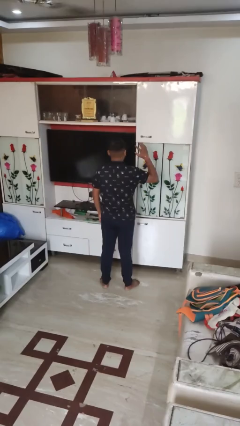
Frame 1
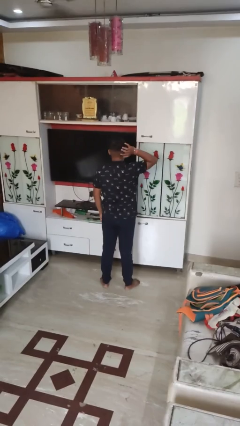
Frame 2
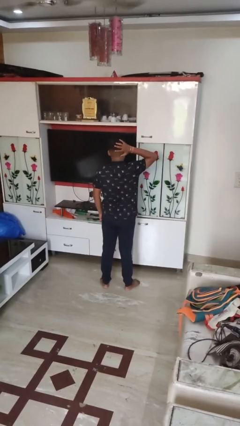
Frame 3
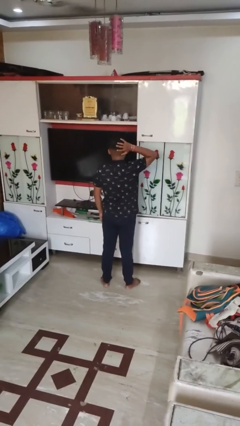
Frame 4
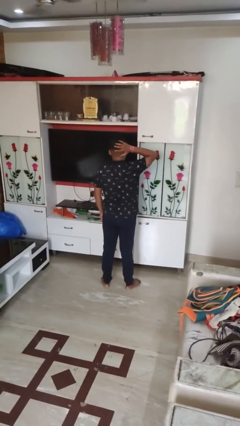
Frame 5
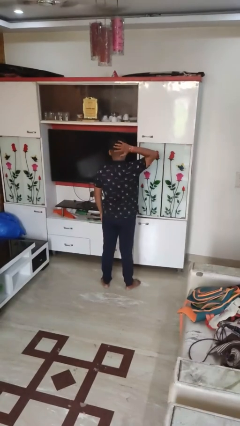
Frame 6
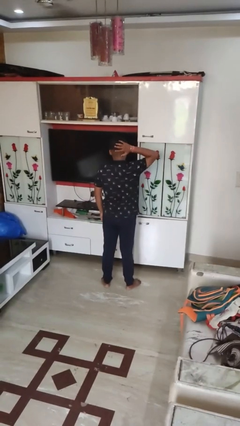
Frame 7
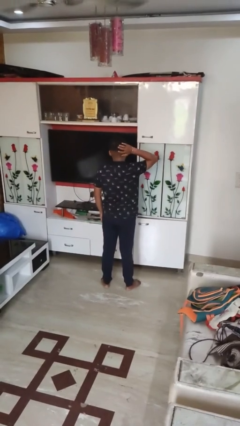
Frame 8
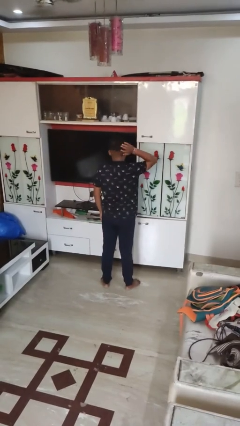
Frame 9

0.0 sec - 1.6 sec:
person pats head

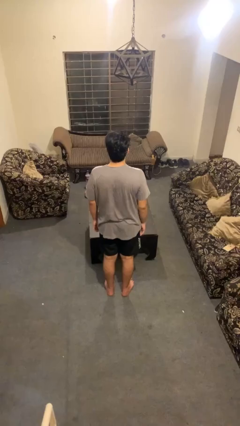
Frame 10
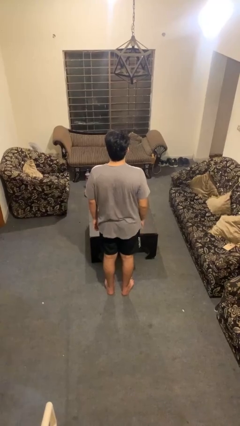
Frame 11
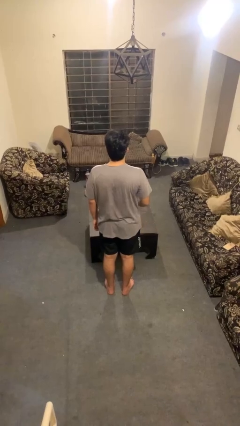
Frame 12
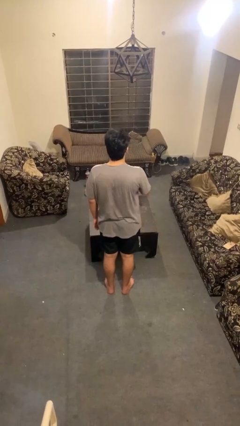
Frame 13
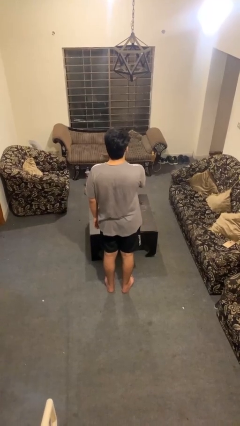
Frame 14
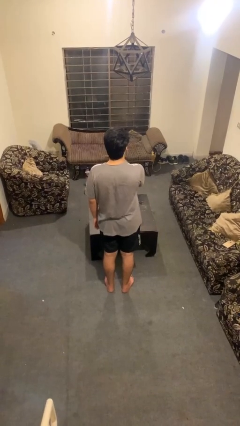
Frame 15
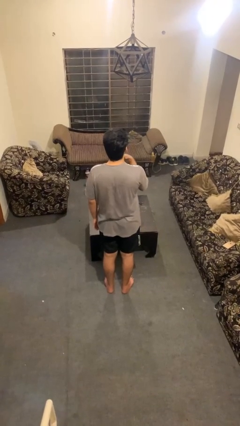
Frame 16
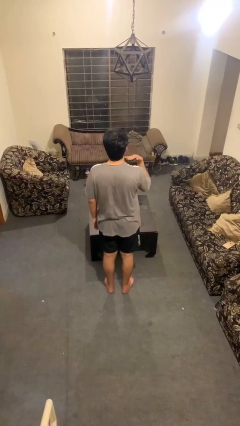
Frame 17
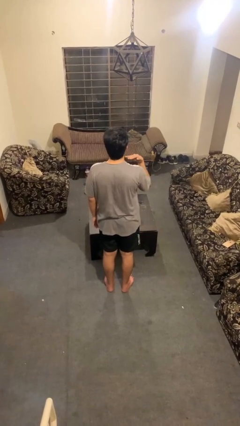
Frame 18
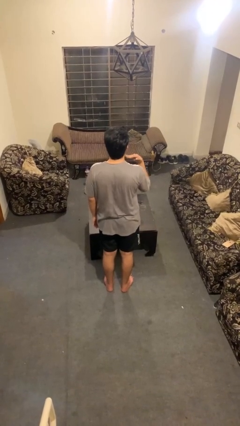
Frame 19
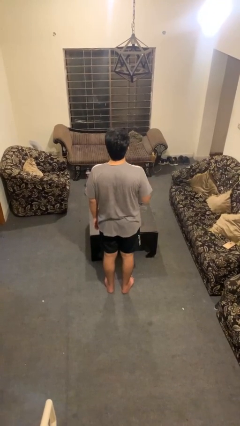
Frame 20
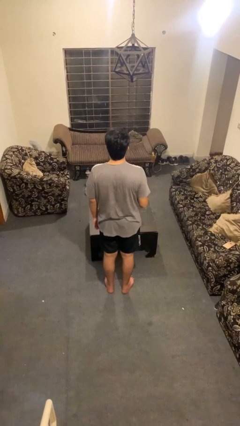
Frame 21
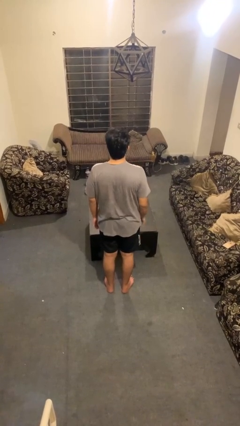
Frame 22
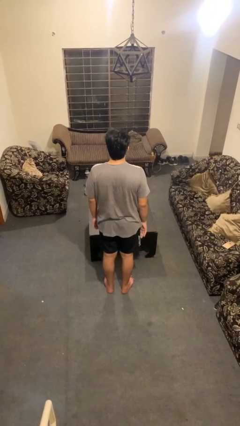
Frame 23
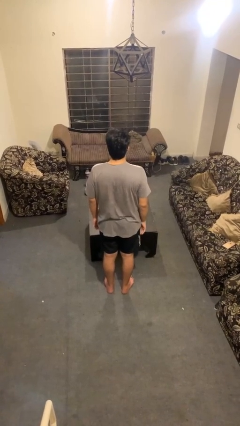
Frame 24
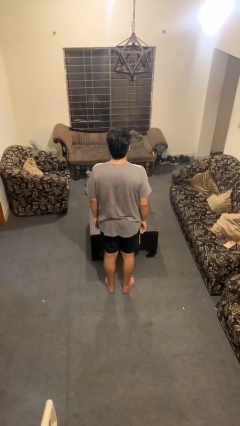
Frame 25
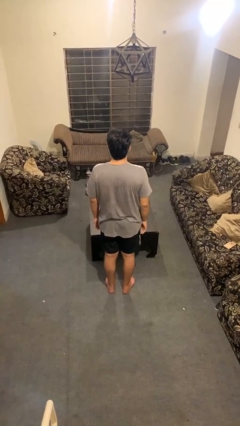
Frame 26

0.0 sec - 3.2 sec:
person gestures cut

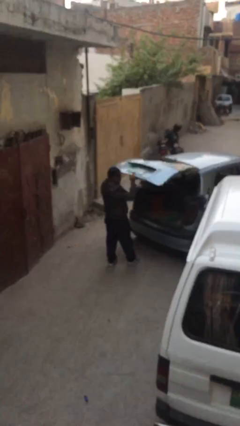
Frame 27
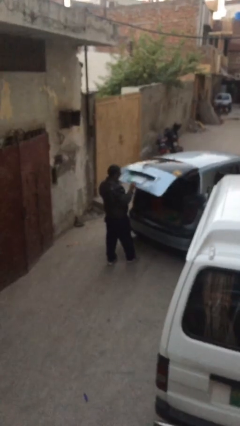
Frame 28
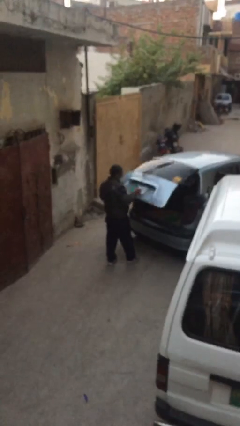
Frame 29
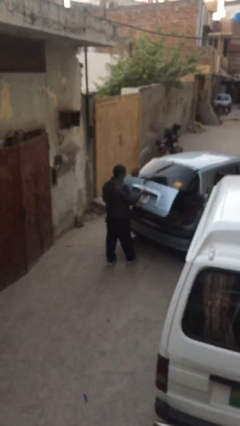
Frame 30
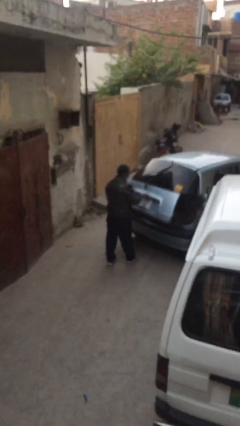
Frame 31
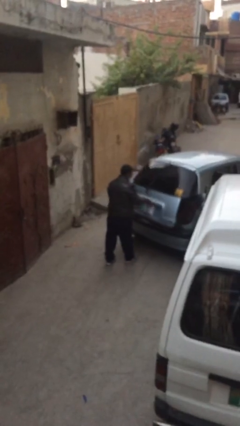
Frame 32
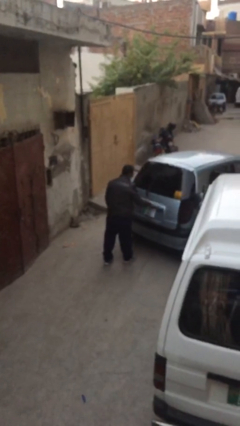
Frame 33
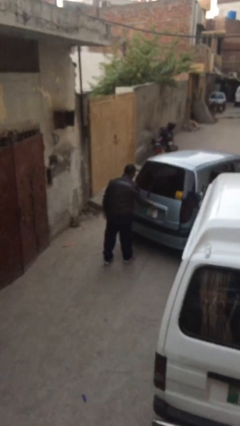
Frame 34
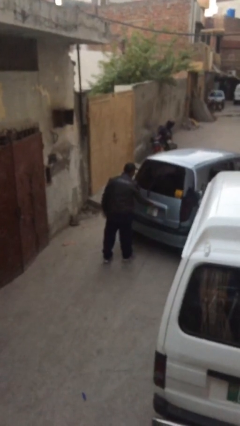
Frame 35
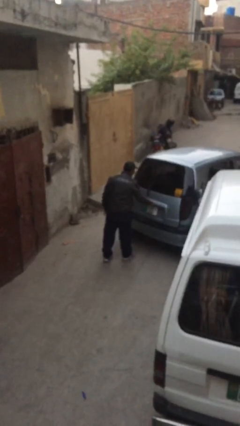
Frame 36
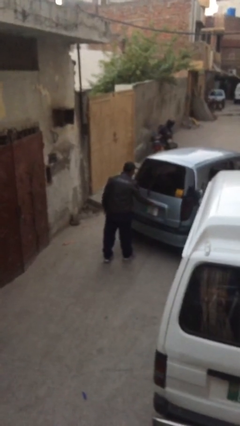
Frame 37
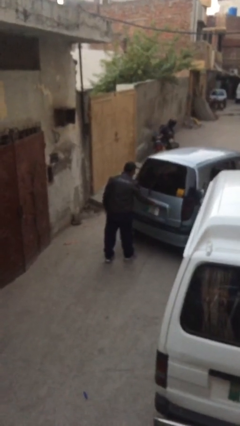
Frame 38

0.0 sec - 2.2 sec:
person closes car trunk

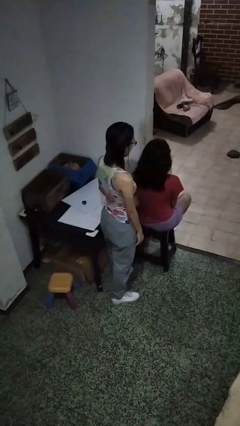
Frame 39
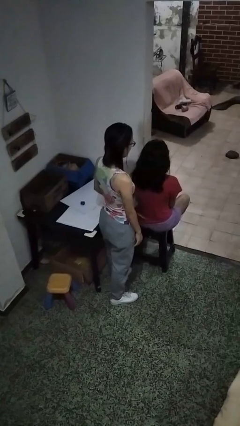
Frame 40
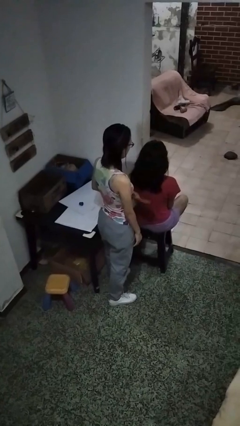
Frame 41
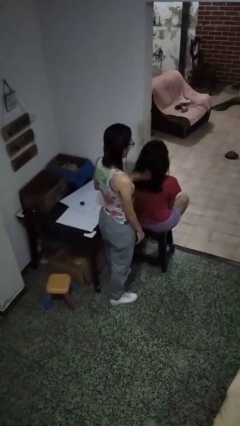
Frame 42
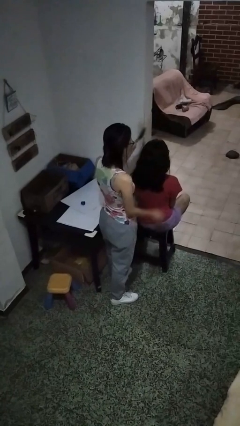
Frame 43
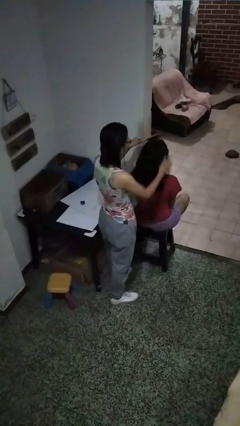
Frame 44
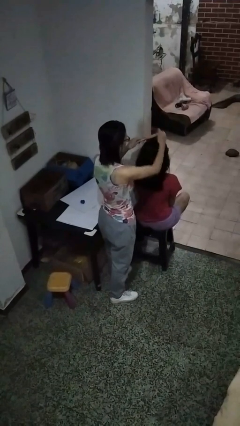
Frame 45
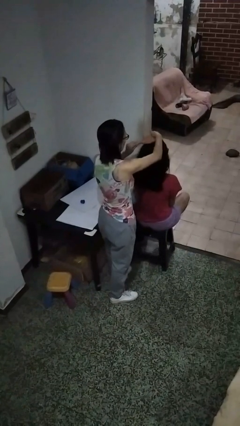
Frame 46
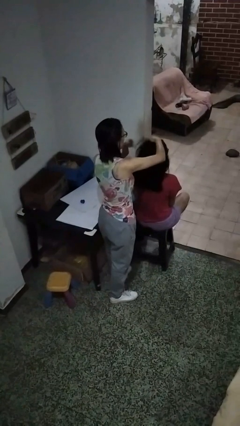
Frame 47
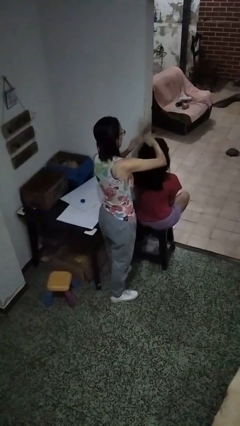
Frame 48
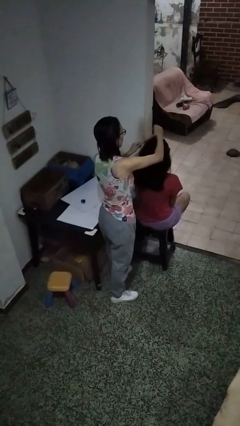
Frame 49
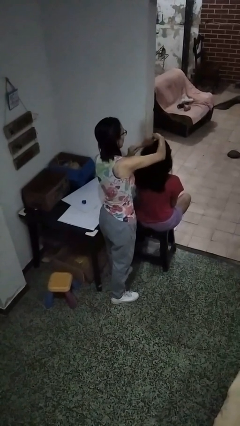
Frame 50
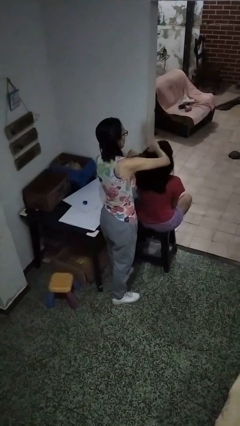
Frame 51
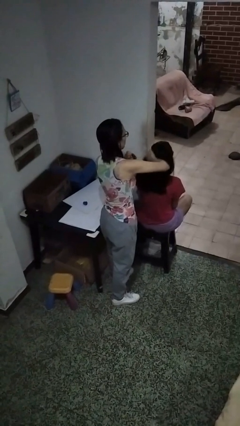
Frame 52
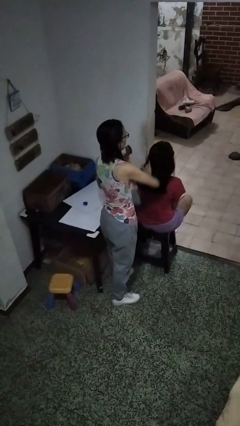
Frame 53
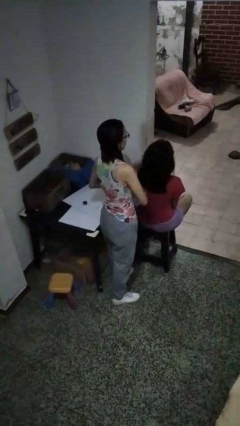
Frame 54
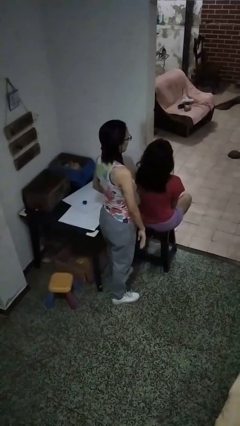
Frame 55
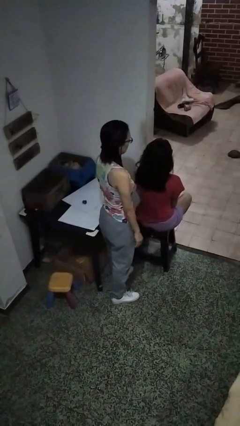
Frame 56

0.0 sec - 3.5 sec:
person brushes hair of person

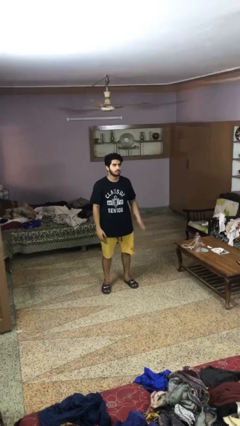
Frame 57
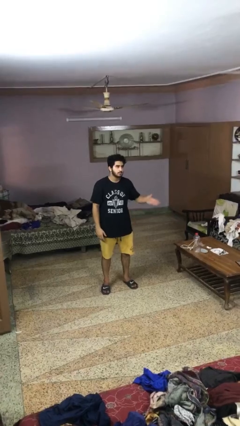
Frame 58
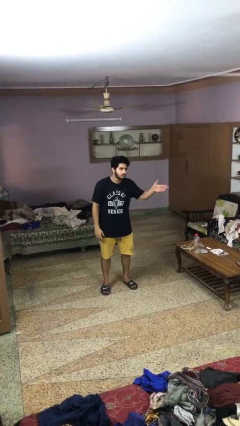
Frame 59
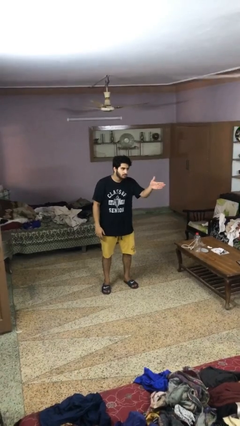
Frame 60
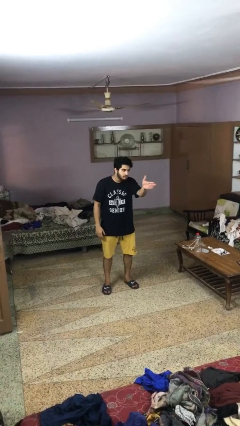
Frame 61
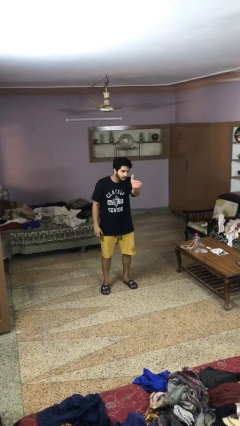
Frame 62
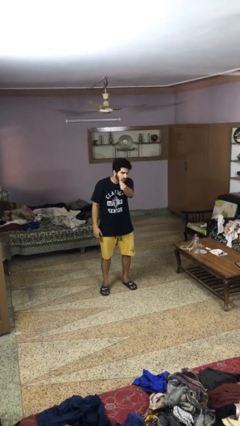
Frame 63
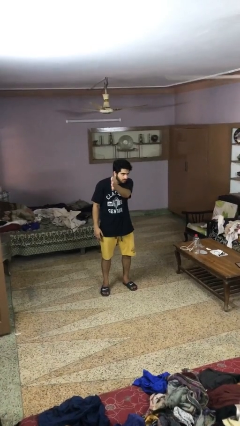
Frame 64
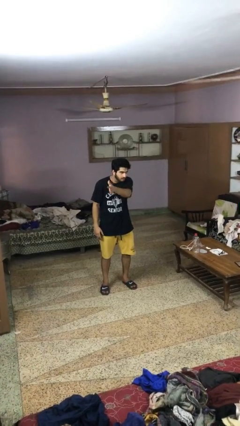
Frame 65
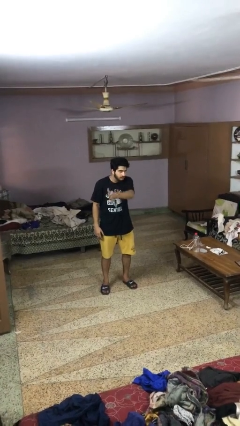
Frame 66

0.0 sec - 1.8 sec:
person gestures swipe right

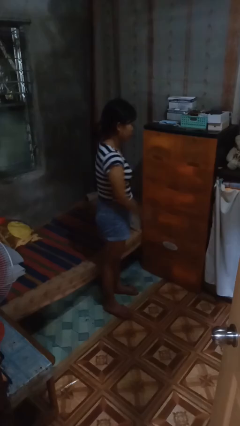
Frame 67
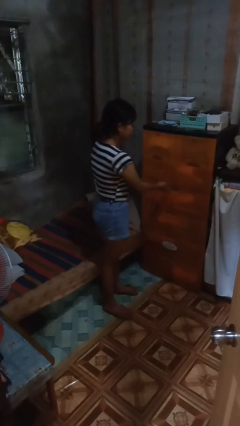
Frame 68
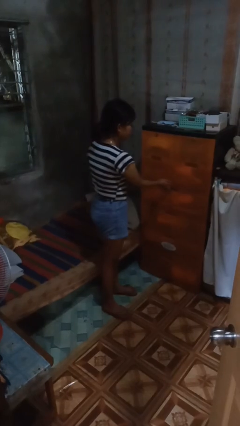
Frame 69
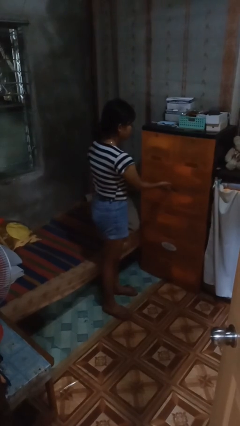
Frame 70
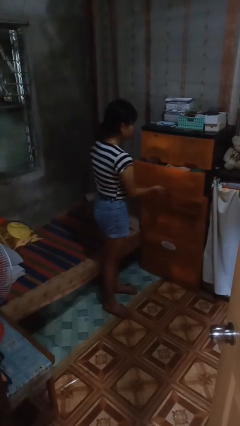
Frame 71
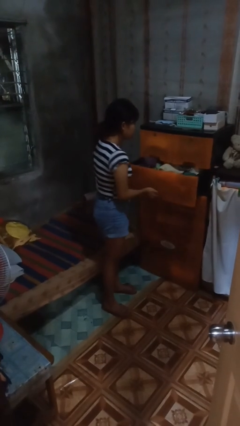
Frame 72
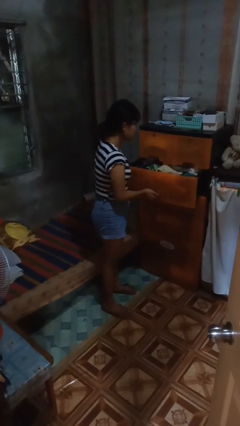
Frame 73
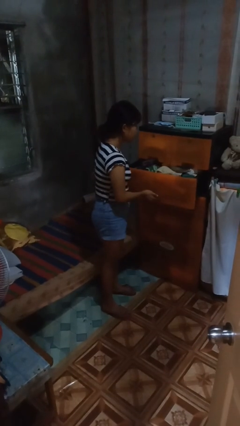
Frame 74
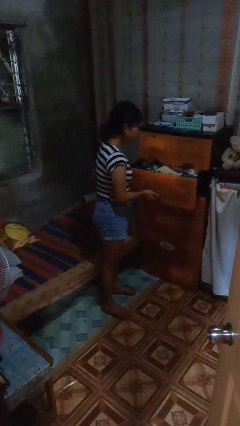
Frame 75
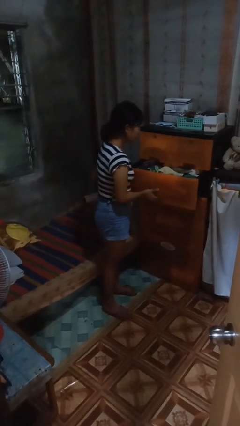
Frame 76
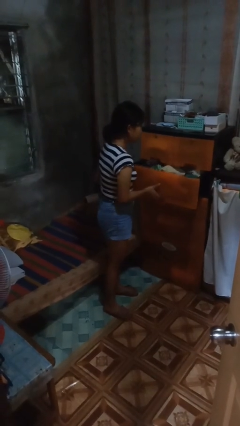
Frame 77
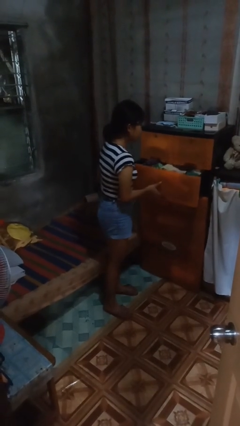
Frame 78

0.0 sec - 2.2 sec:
person opens dresser drawer

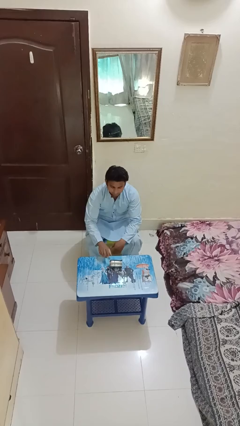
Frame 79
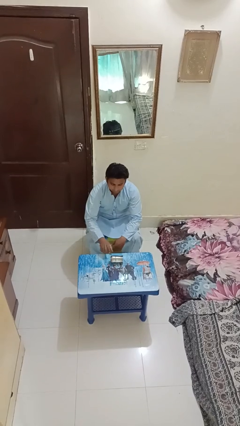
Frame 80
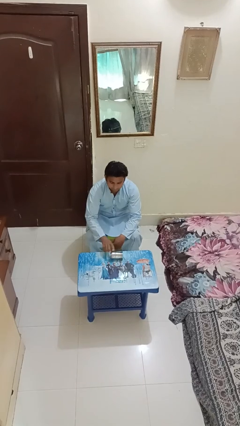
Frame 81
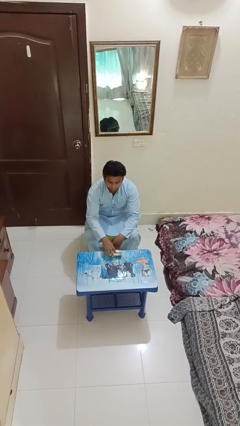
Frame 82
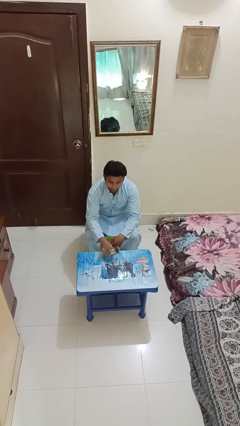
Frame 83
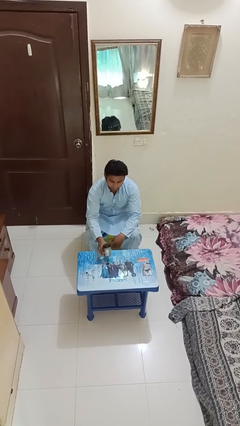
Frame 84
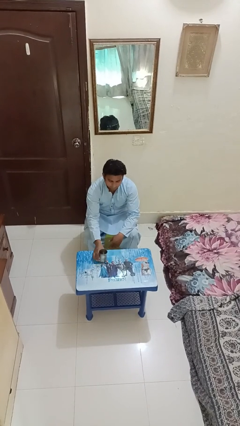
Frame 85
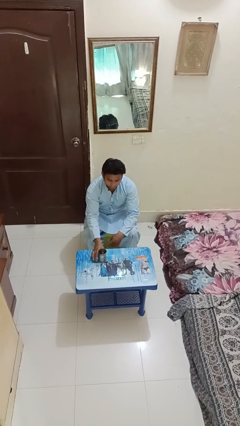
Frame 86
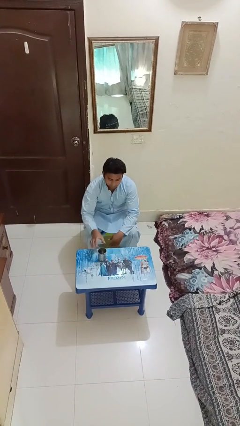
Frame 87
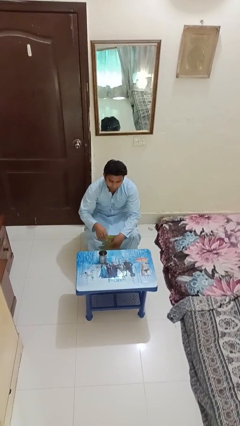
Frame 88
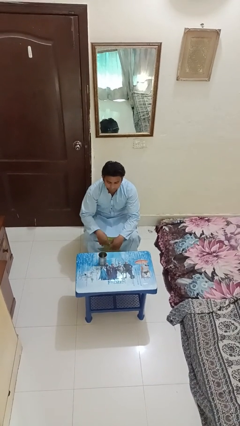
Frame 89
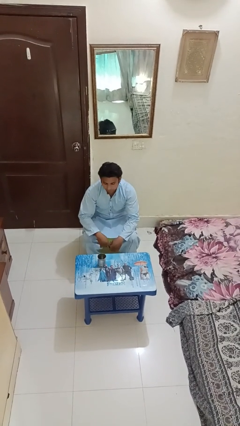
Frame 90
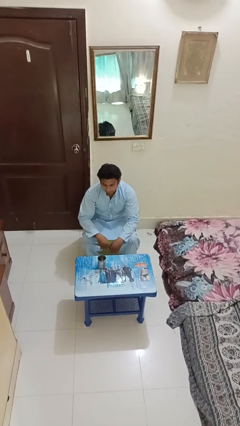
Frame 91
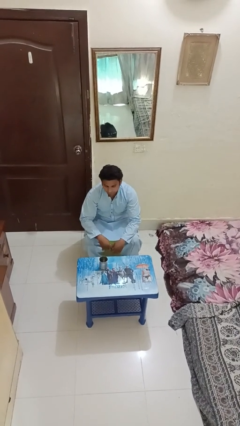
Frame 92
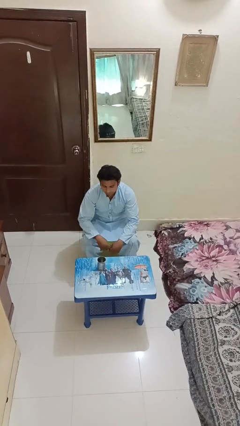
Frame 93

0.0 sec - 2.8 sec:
person sets upright glass
